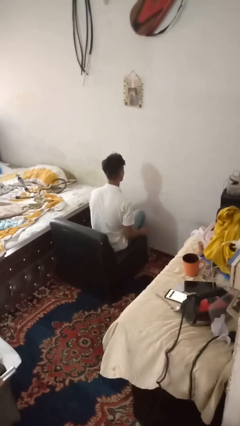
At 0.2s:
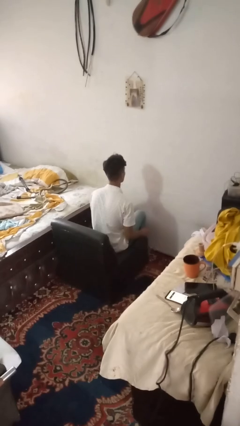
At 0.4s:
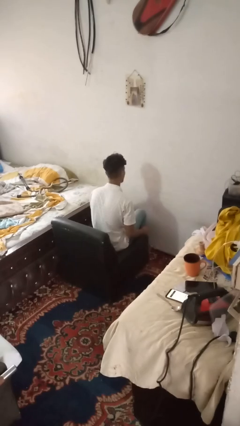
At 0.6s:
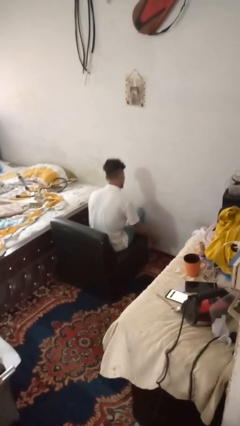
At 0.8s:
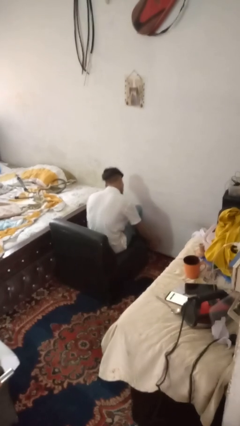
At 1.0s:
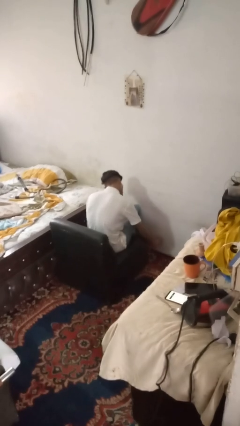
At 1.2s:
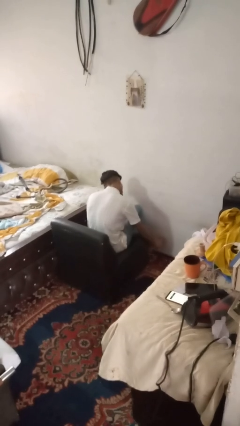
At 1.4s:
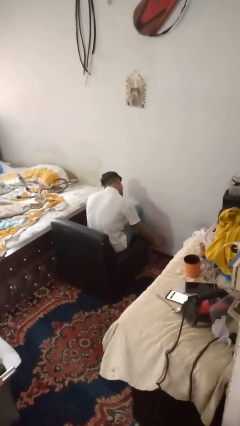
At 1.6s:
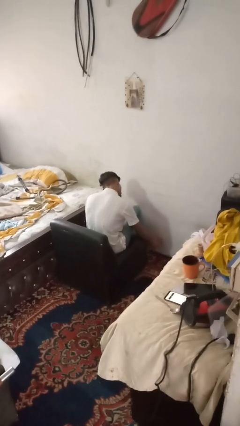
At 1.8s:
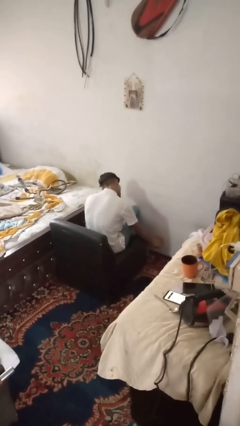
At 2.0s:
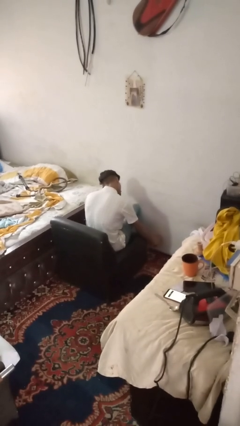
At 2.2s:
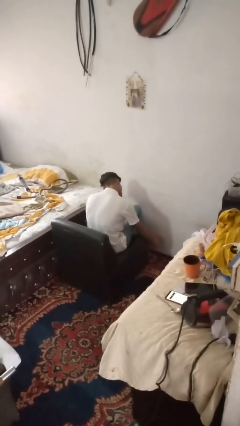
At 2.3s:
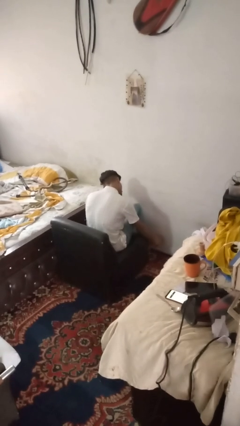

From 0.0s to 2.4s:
person rubs foot

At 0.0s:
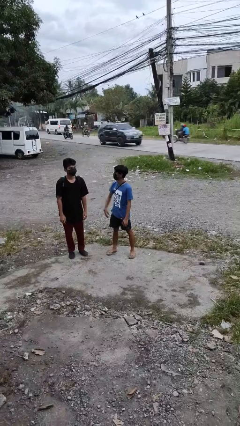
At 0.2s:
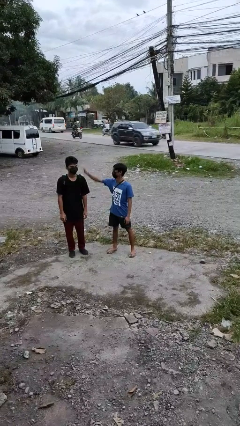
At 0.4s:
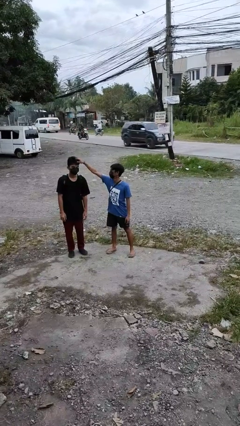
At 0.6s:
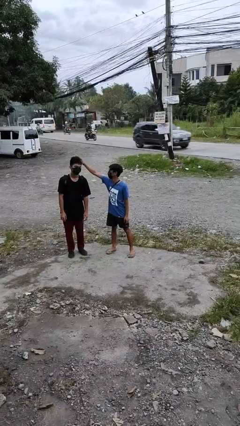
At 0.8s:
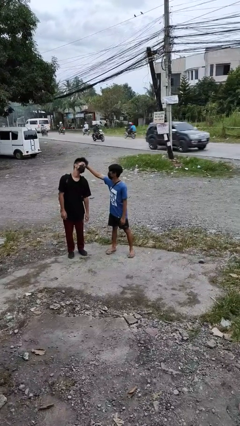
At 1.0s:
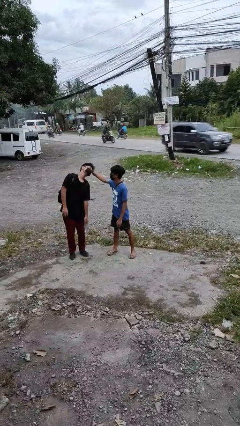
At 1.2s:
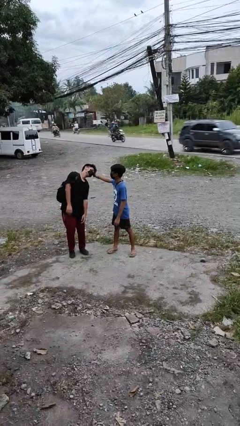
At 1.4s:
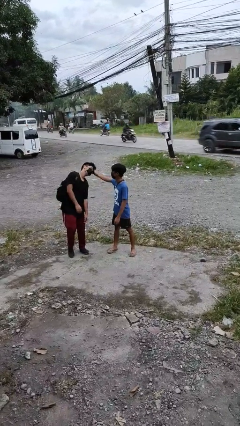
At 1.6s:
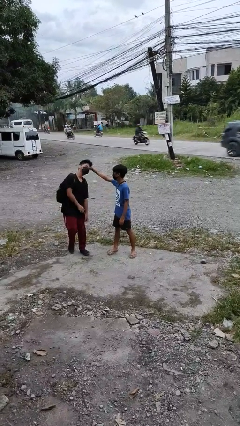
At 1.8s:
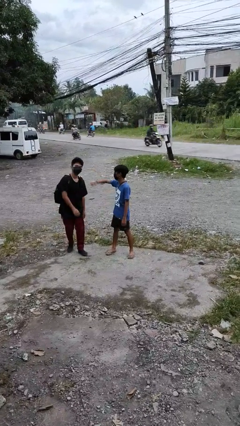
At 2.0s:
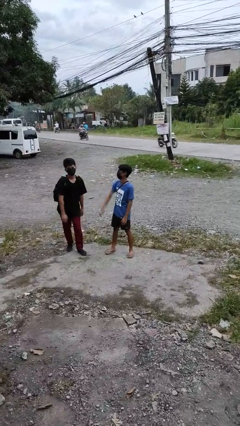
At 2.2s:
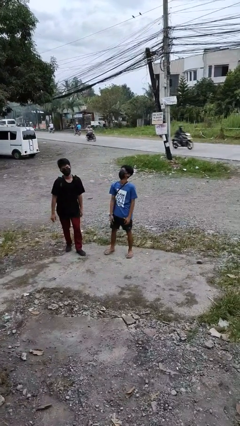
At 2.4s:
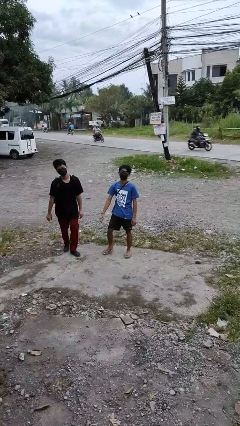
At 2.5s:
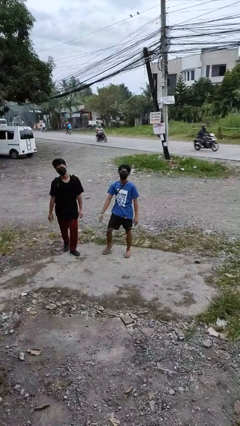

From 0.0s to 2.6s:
person grabs person by hair

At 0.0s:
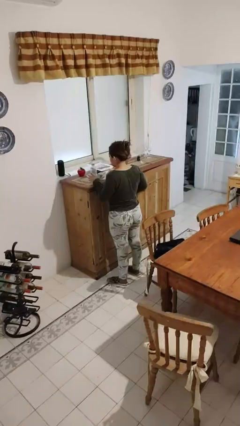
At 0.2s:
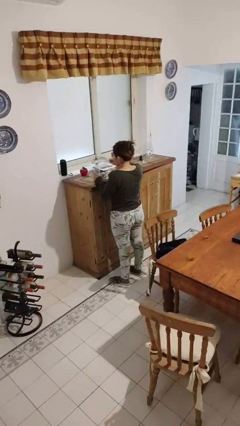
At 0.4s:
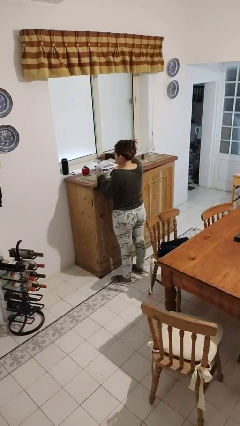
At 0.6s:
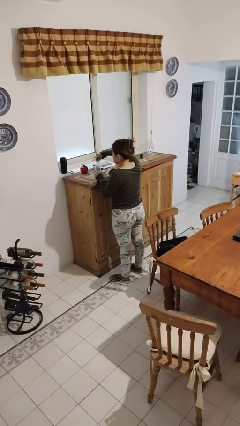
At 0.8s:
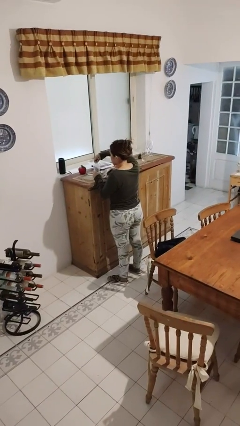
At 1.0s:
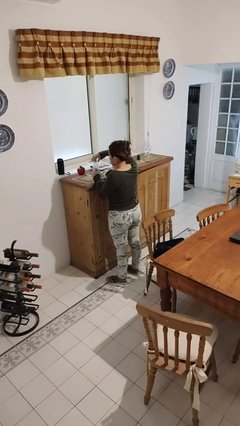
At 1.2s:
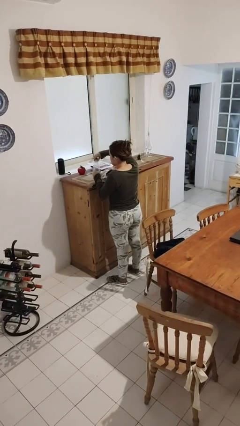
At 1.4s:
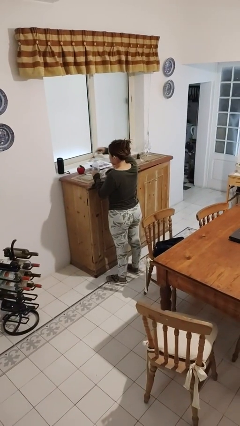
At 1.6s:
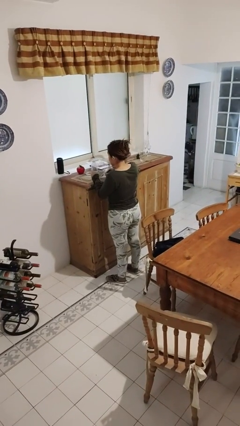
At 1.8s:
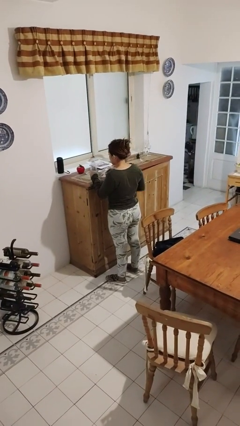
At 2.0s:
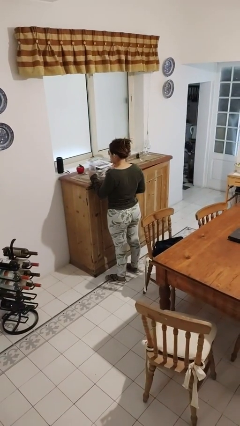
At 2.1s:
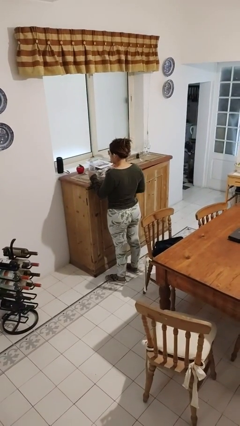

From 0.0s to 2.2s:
person unscrews lid from bottle

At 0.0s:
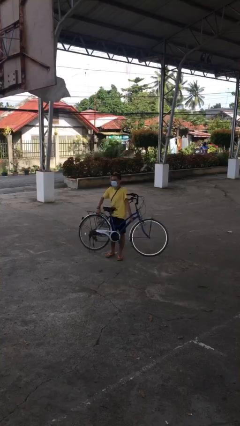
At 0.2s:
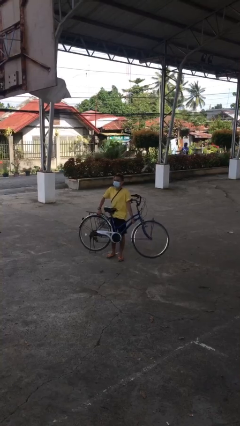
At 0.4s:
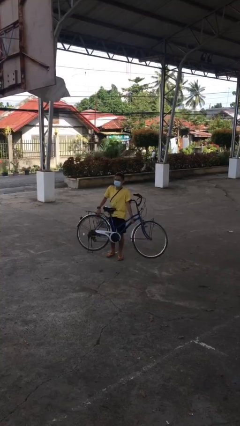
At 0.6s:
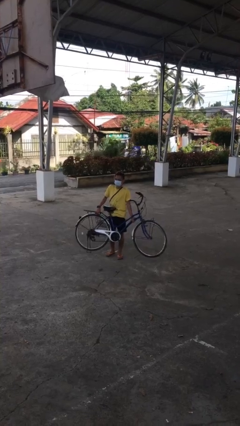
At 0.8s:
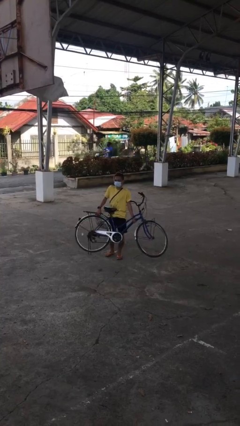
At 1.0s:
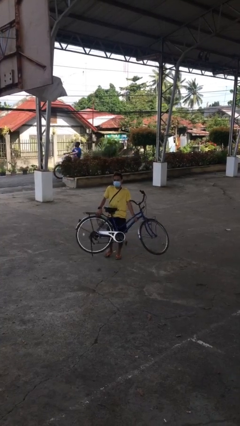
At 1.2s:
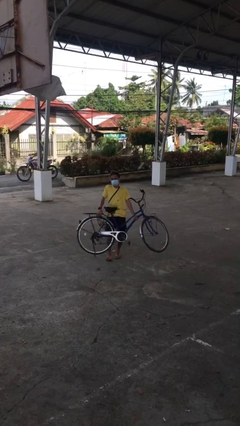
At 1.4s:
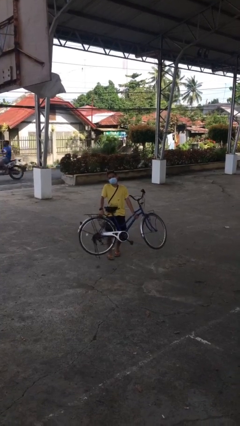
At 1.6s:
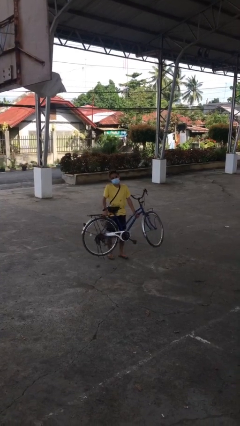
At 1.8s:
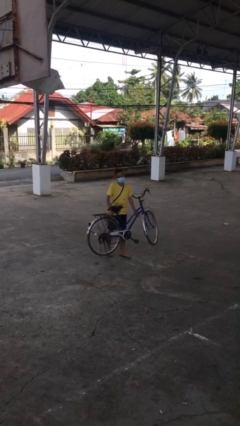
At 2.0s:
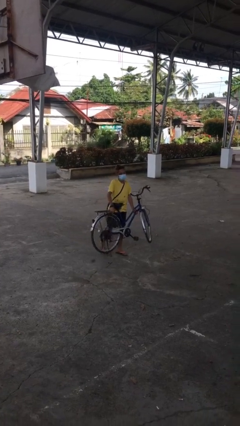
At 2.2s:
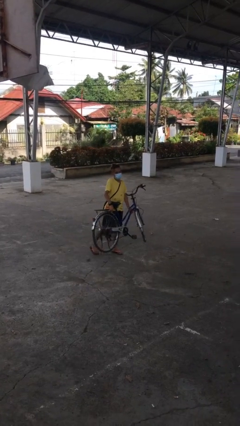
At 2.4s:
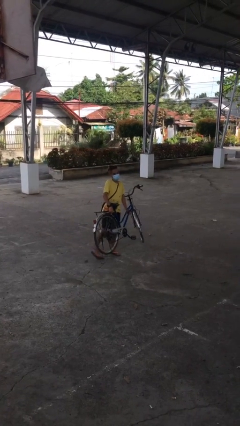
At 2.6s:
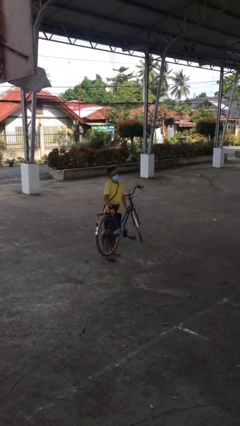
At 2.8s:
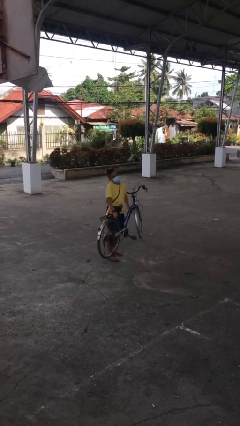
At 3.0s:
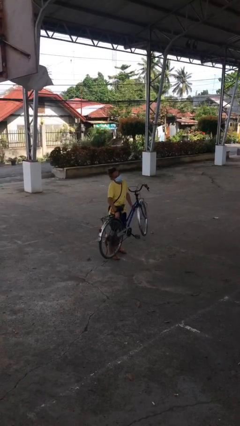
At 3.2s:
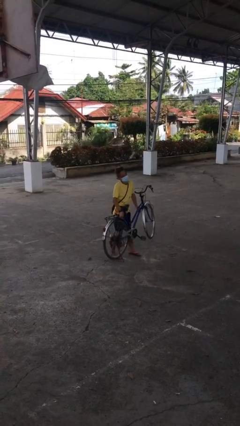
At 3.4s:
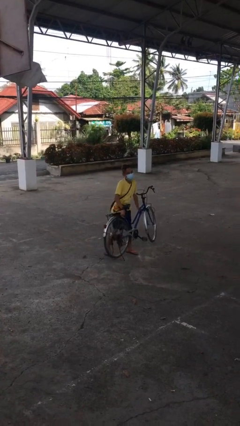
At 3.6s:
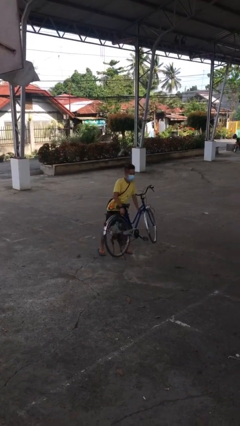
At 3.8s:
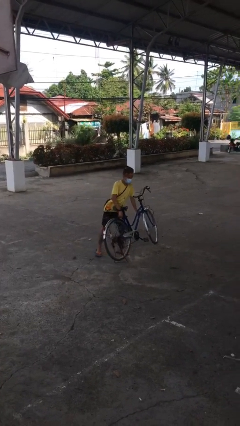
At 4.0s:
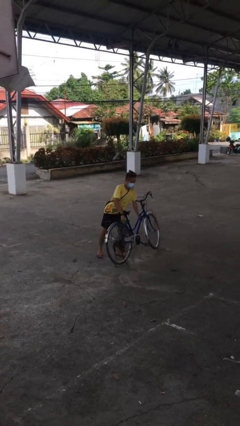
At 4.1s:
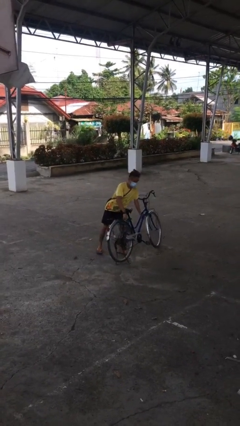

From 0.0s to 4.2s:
person carries heavy object

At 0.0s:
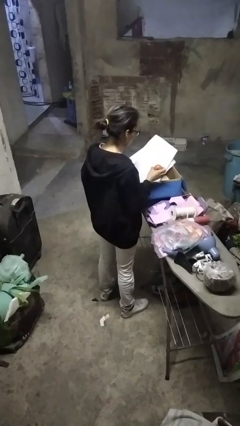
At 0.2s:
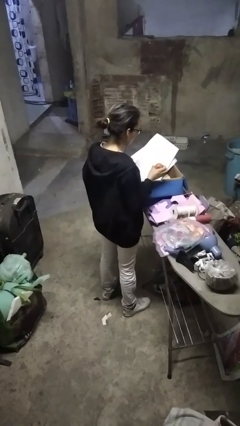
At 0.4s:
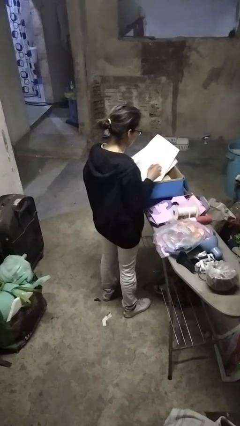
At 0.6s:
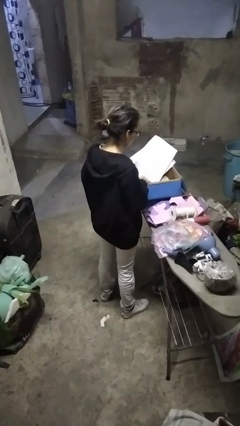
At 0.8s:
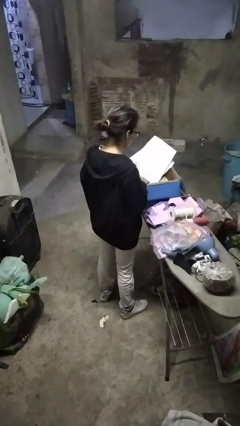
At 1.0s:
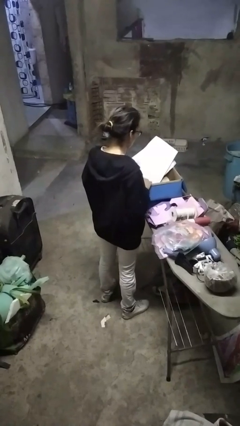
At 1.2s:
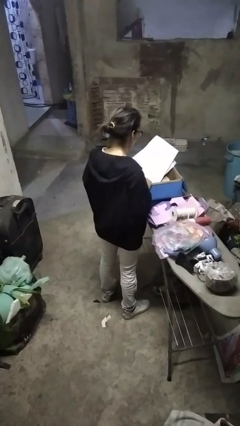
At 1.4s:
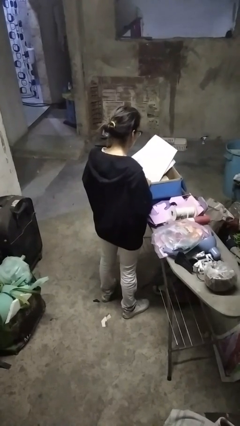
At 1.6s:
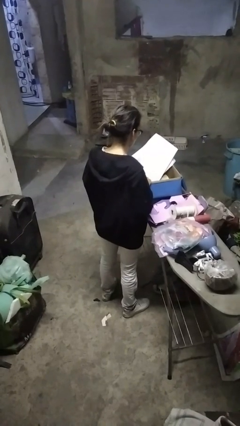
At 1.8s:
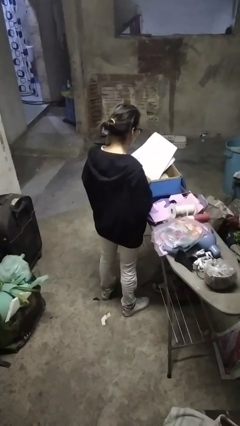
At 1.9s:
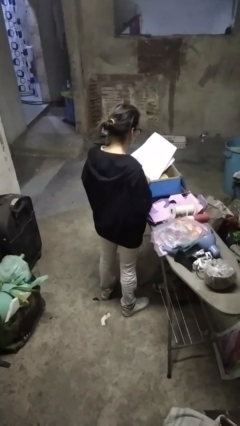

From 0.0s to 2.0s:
person puts object into box

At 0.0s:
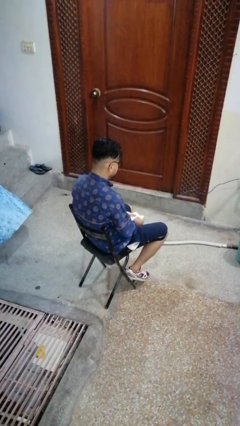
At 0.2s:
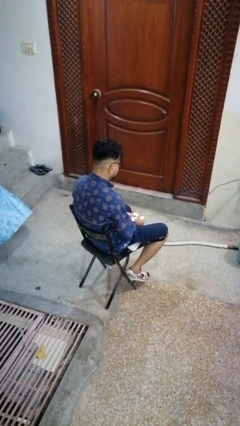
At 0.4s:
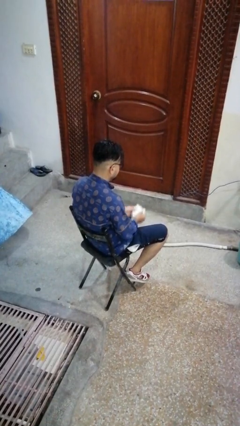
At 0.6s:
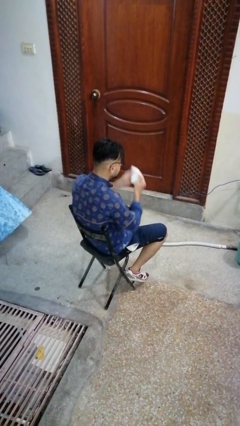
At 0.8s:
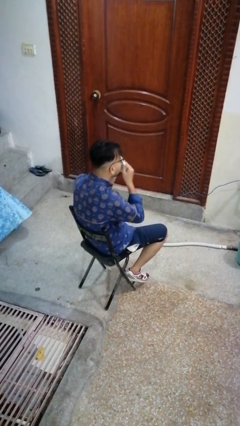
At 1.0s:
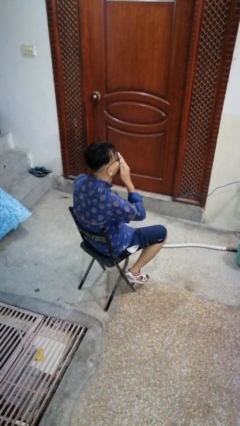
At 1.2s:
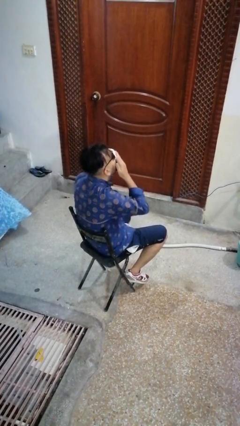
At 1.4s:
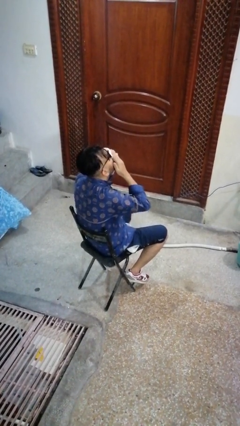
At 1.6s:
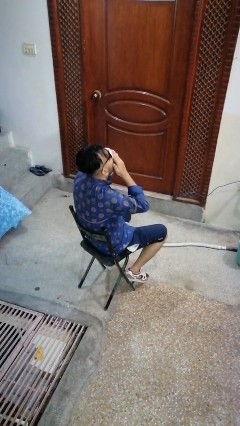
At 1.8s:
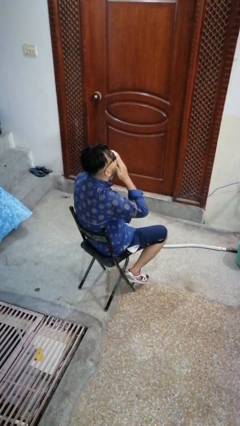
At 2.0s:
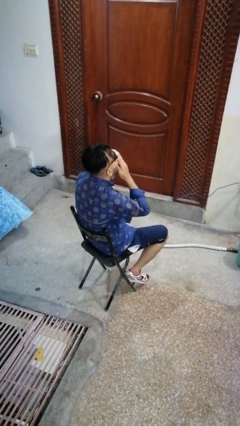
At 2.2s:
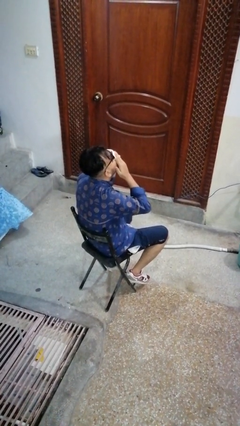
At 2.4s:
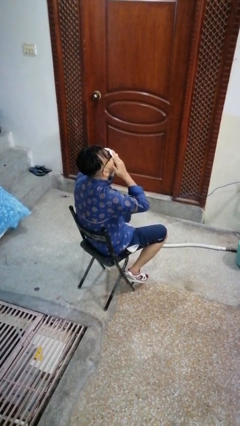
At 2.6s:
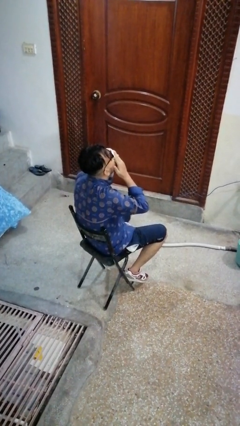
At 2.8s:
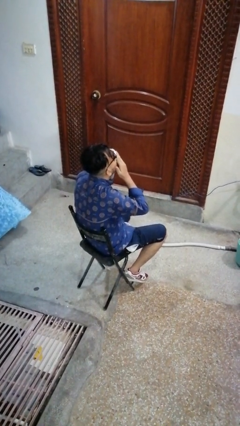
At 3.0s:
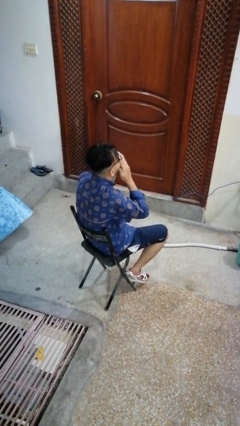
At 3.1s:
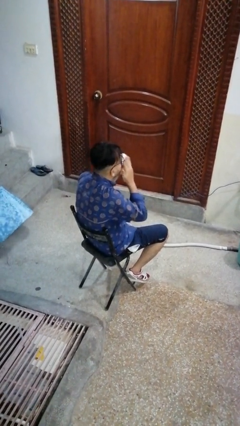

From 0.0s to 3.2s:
person blows nose

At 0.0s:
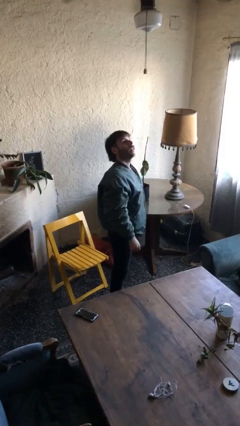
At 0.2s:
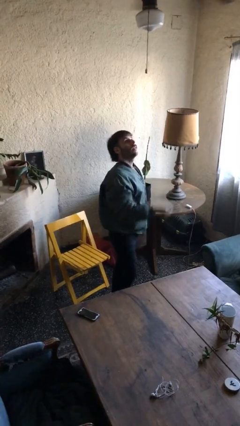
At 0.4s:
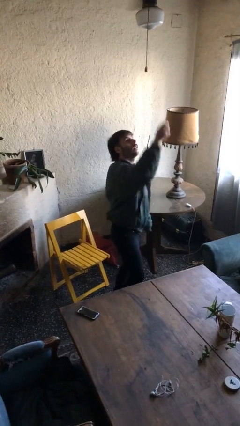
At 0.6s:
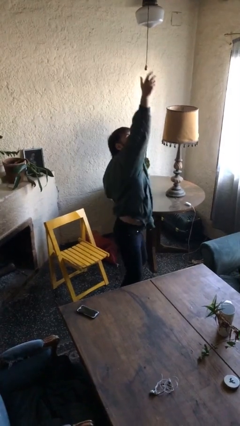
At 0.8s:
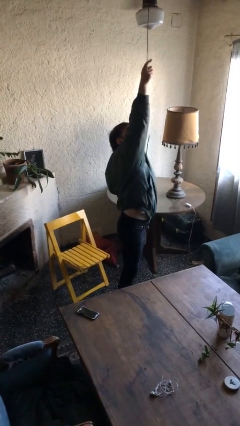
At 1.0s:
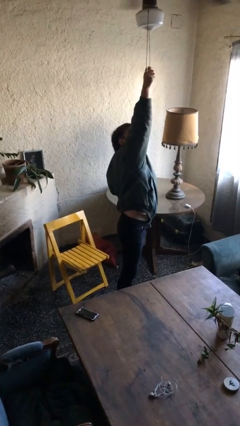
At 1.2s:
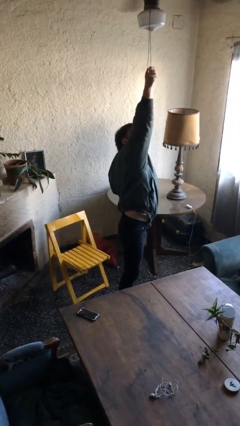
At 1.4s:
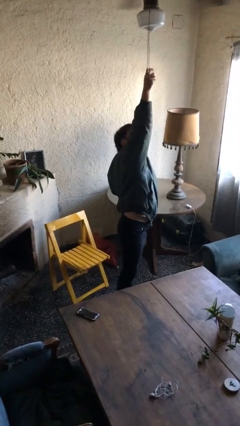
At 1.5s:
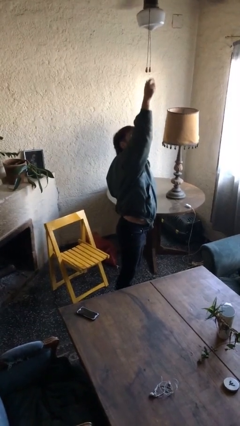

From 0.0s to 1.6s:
person turns on fan
